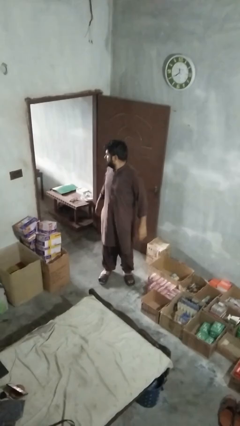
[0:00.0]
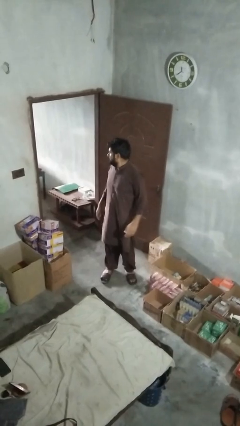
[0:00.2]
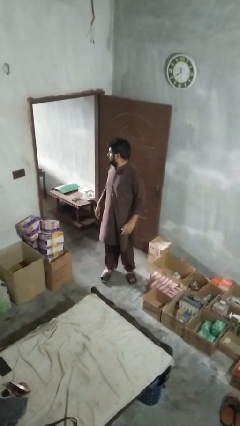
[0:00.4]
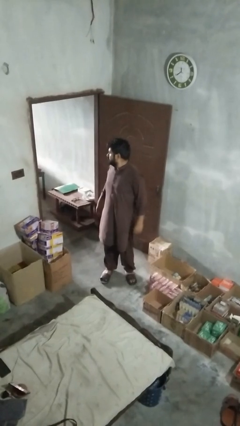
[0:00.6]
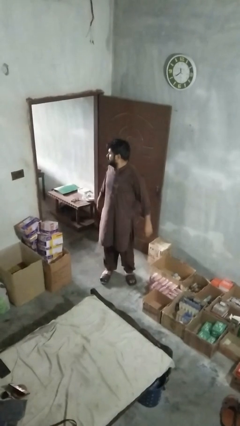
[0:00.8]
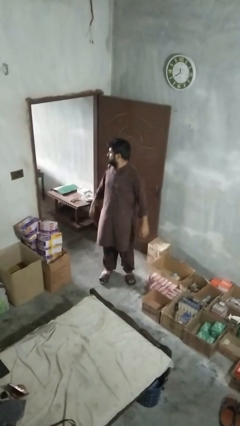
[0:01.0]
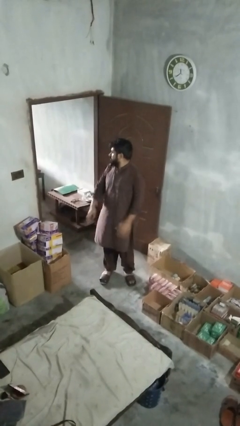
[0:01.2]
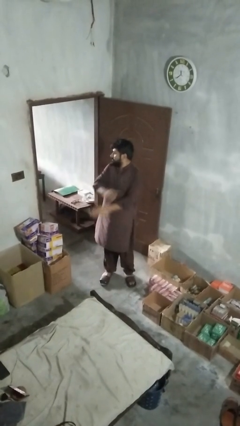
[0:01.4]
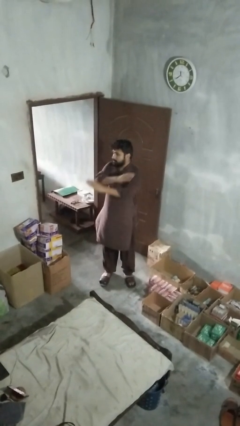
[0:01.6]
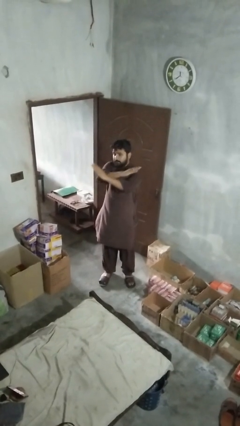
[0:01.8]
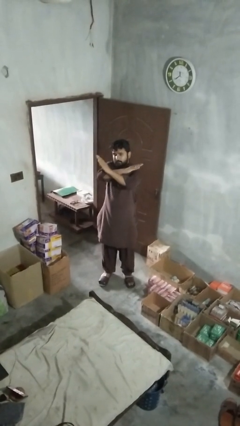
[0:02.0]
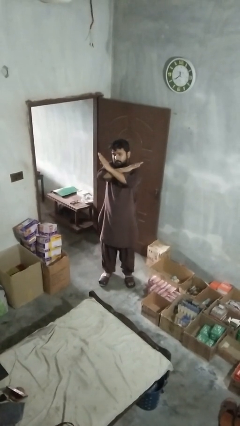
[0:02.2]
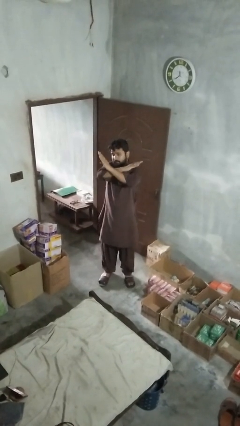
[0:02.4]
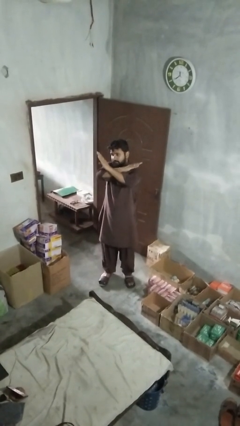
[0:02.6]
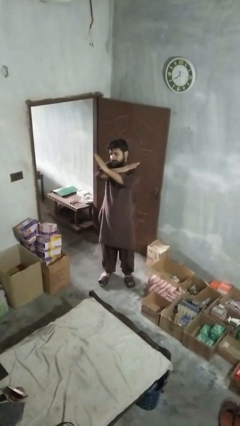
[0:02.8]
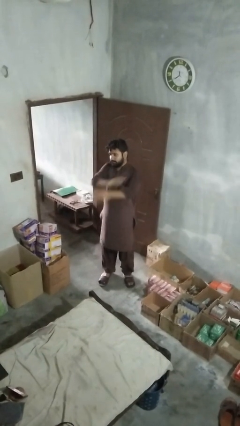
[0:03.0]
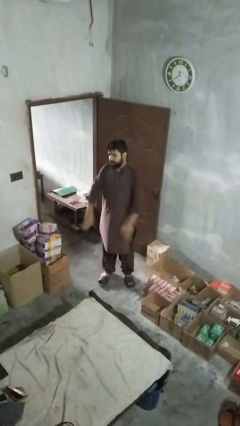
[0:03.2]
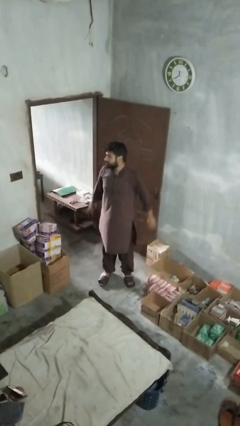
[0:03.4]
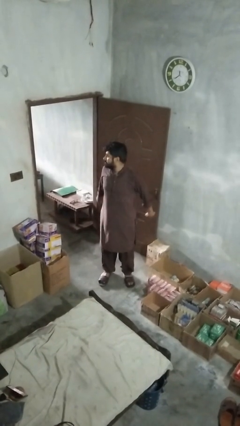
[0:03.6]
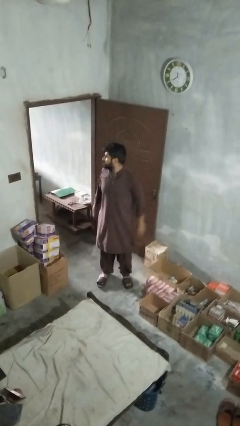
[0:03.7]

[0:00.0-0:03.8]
person gestures arms x

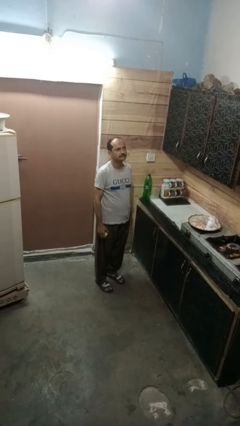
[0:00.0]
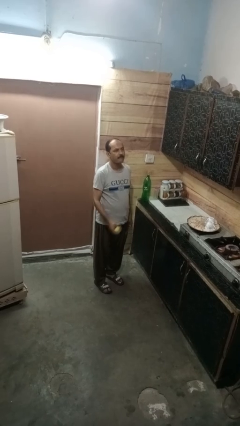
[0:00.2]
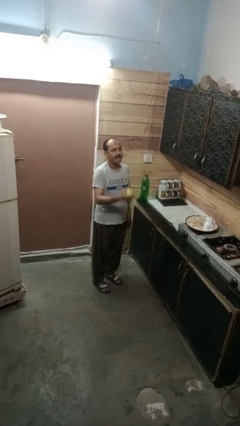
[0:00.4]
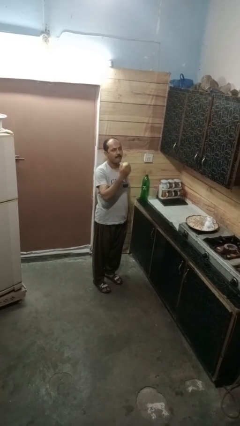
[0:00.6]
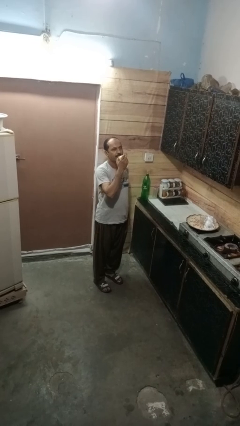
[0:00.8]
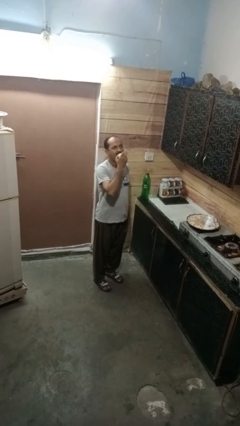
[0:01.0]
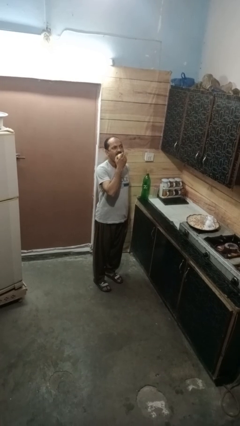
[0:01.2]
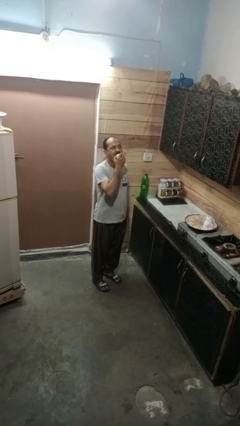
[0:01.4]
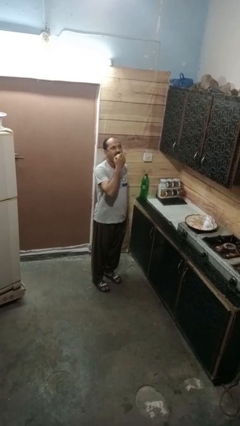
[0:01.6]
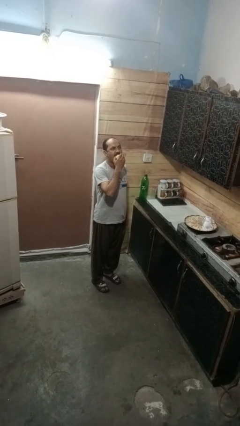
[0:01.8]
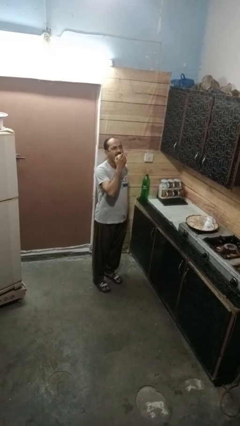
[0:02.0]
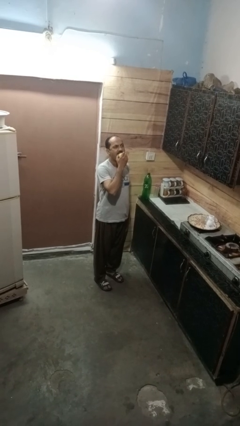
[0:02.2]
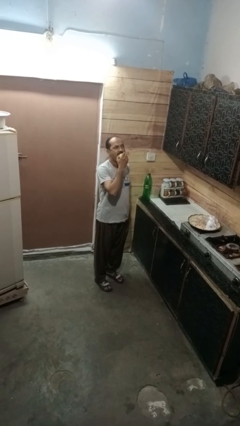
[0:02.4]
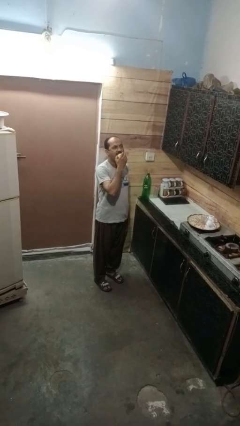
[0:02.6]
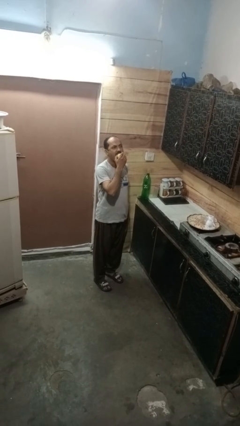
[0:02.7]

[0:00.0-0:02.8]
person eats apple

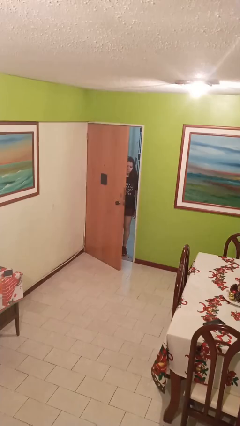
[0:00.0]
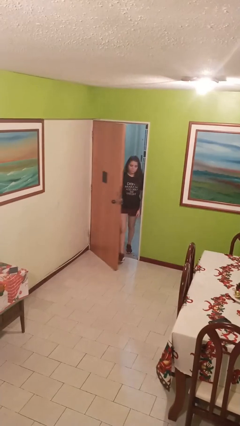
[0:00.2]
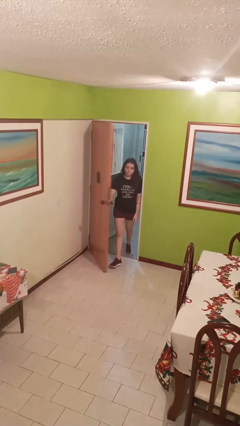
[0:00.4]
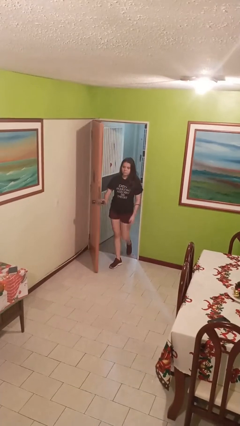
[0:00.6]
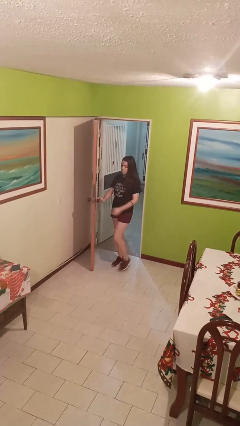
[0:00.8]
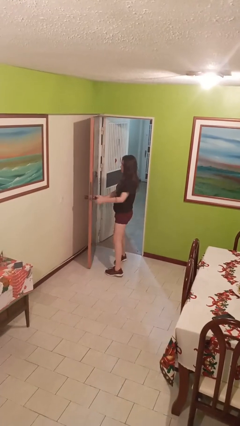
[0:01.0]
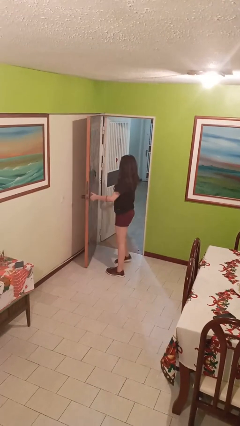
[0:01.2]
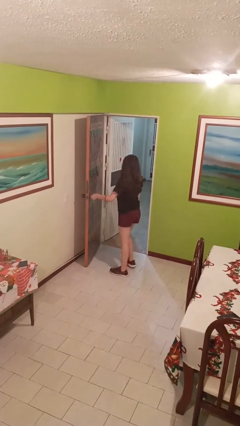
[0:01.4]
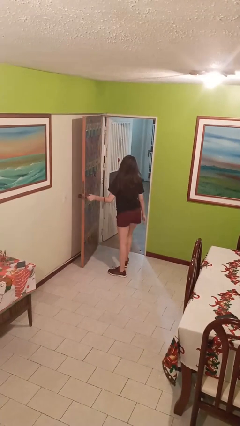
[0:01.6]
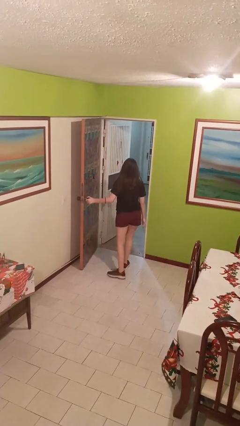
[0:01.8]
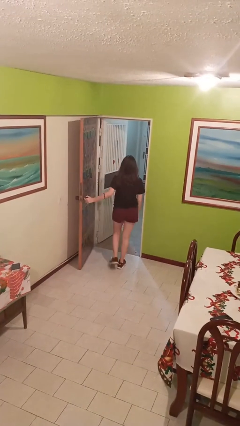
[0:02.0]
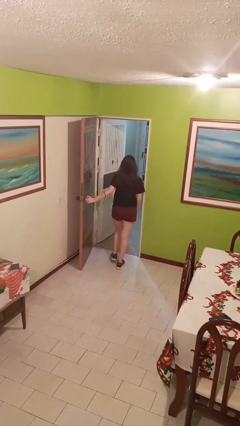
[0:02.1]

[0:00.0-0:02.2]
person opens facility door

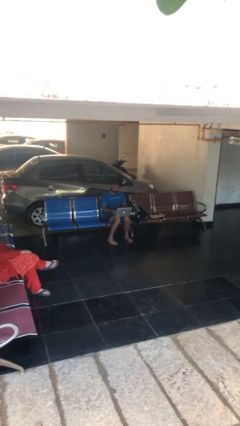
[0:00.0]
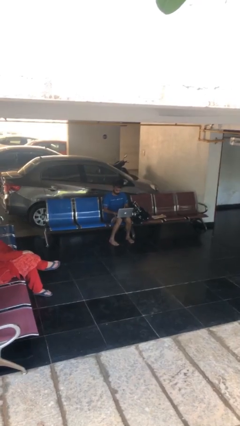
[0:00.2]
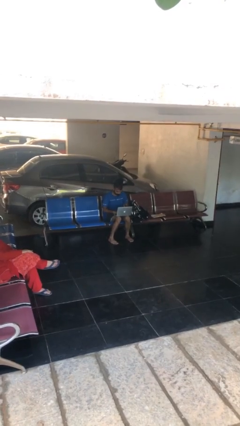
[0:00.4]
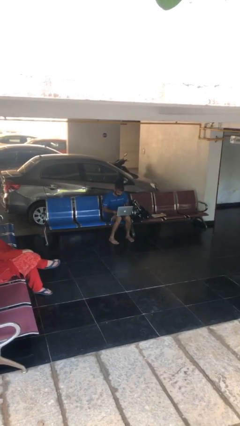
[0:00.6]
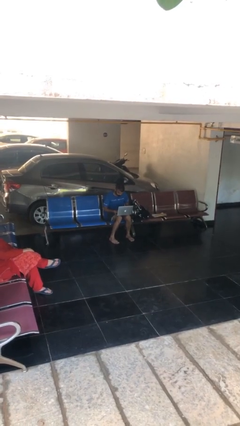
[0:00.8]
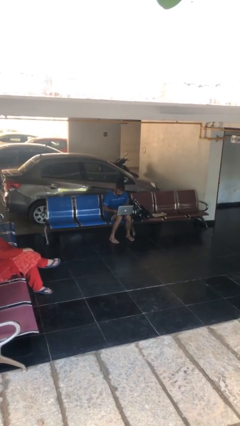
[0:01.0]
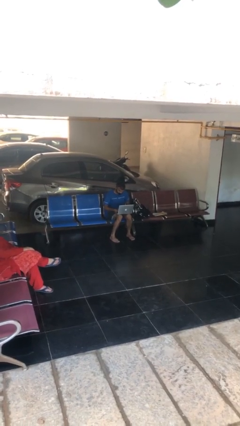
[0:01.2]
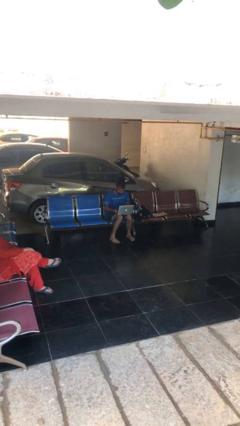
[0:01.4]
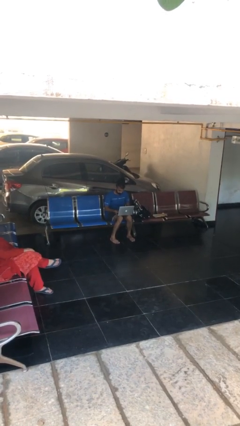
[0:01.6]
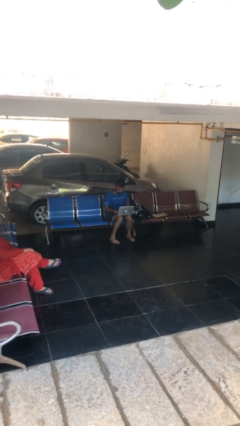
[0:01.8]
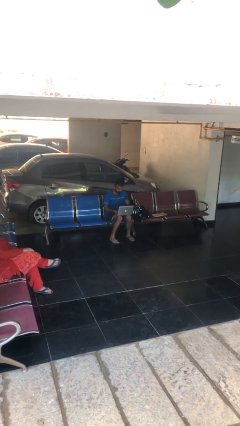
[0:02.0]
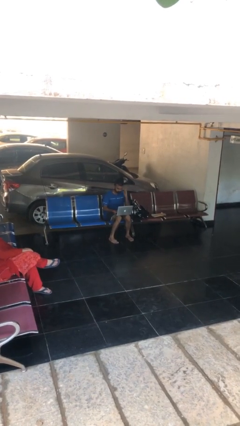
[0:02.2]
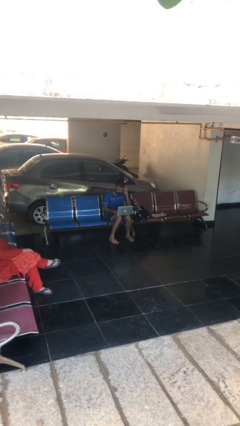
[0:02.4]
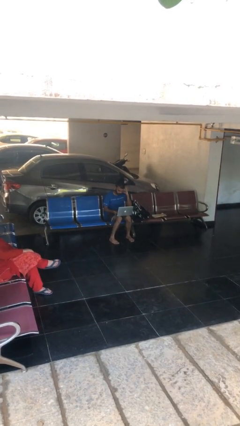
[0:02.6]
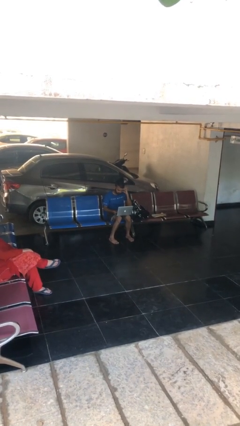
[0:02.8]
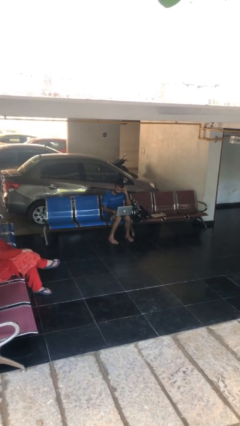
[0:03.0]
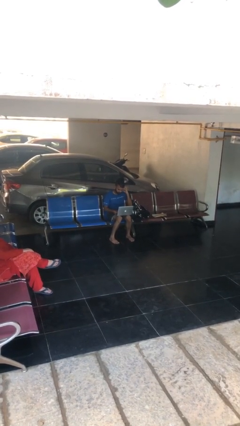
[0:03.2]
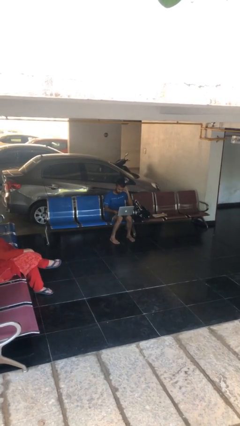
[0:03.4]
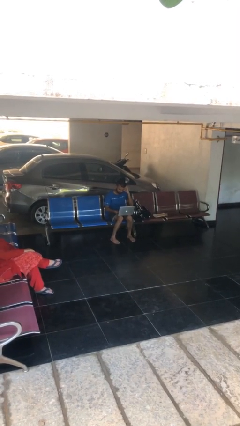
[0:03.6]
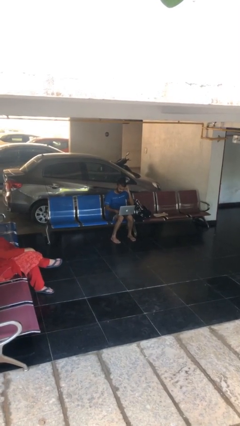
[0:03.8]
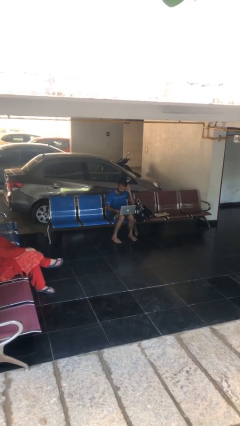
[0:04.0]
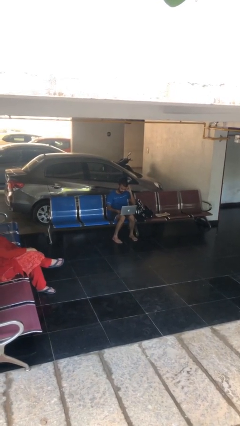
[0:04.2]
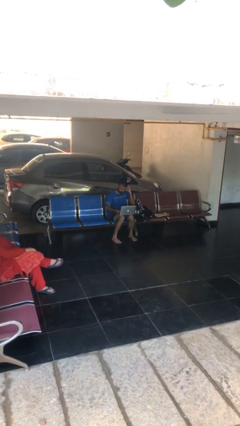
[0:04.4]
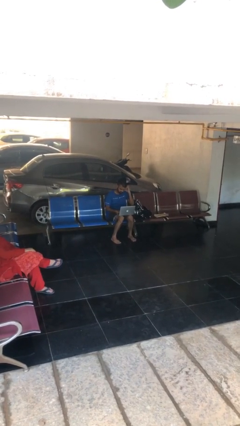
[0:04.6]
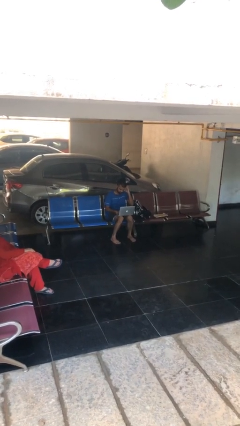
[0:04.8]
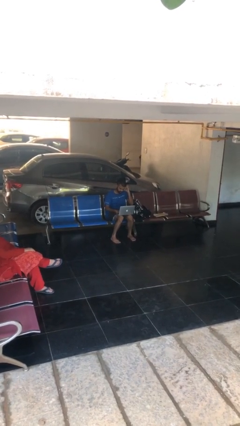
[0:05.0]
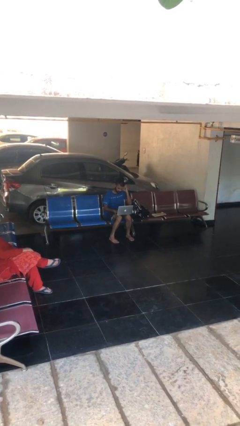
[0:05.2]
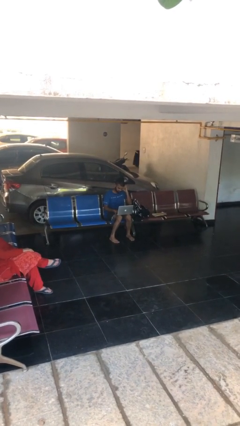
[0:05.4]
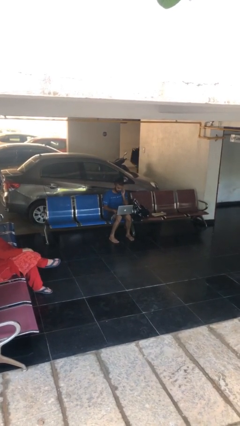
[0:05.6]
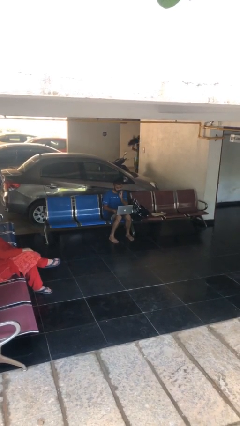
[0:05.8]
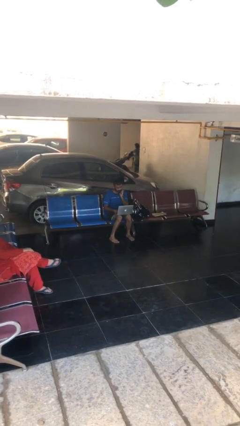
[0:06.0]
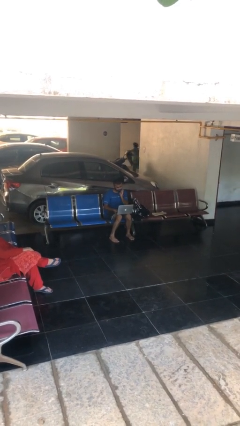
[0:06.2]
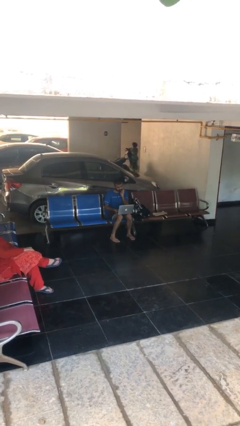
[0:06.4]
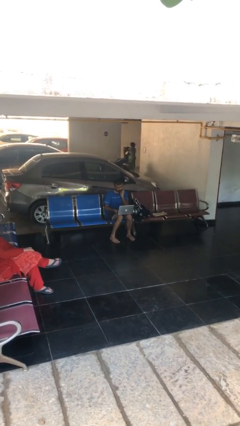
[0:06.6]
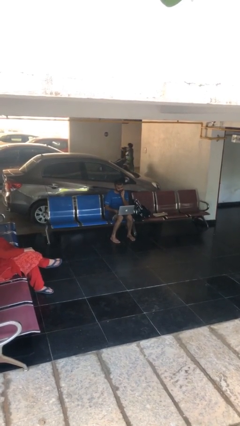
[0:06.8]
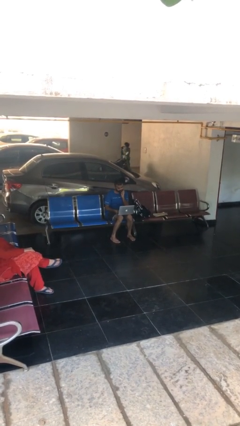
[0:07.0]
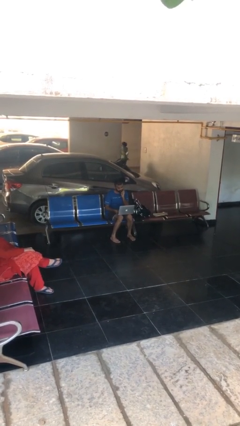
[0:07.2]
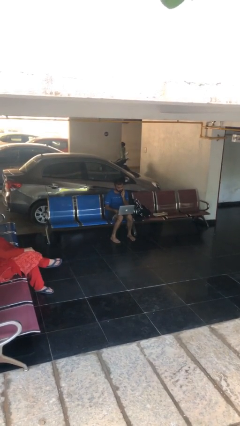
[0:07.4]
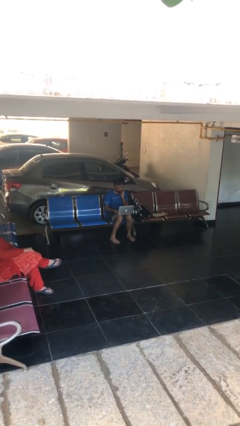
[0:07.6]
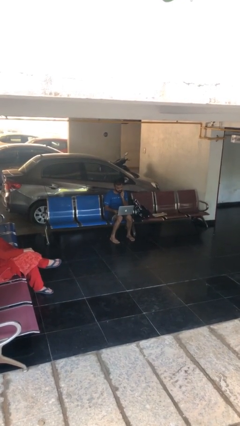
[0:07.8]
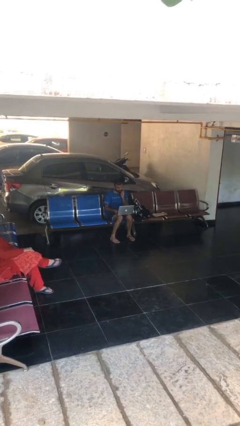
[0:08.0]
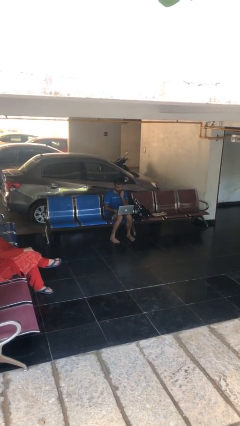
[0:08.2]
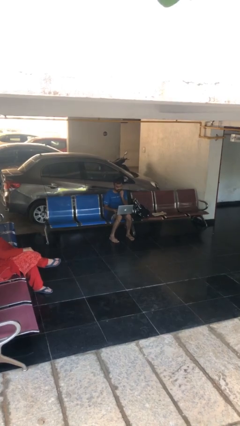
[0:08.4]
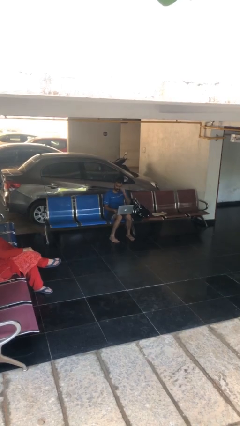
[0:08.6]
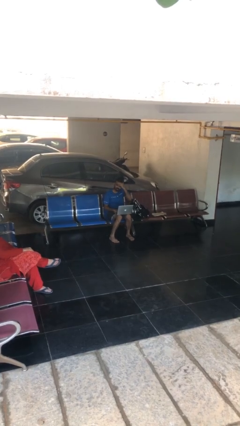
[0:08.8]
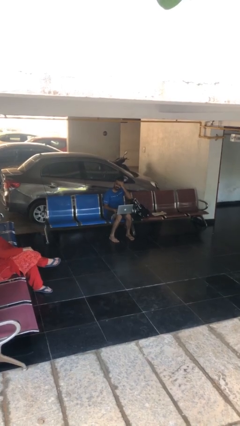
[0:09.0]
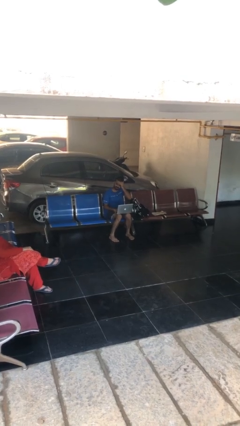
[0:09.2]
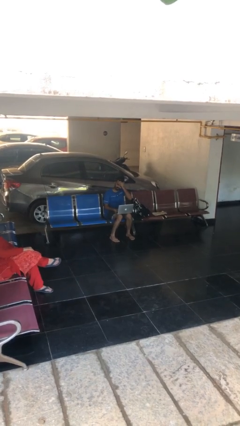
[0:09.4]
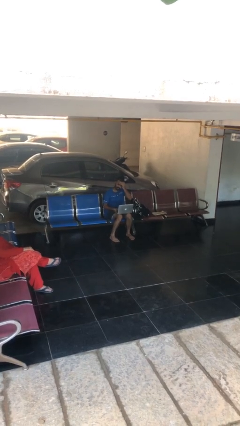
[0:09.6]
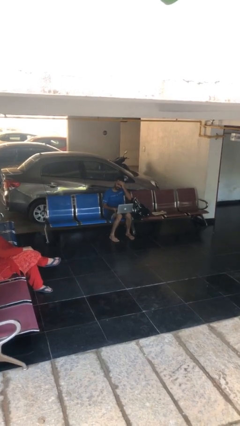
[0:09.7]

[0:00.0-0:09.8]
person interacts with laptop
